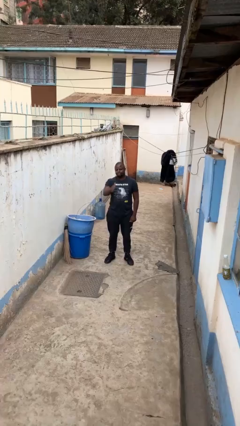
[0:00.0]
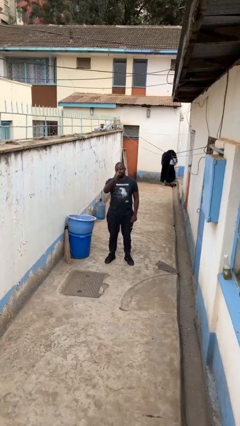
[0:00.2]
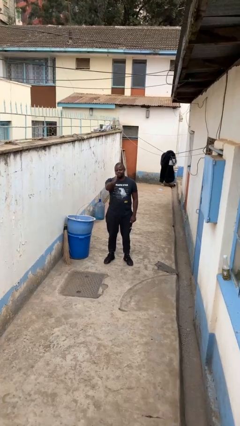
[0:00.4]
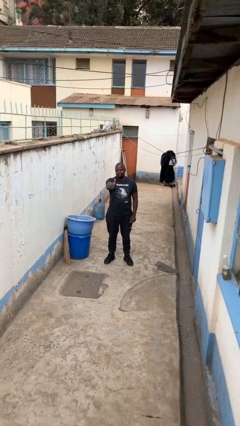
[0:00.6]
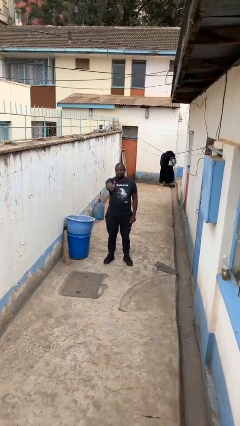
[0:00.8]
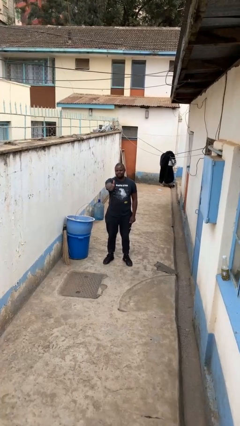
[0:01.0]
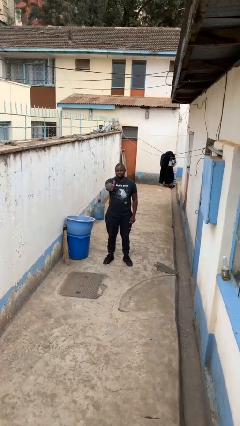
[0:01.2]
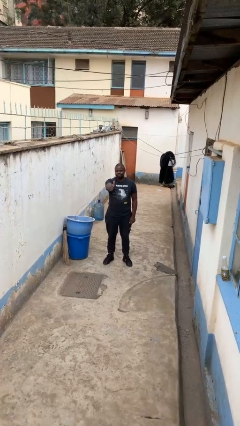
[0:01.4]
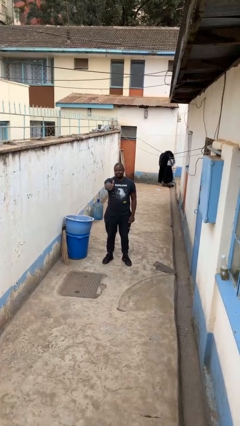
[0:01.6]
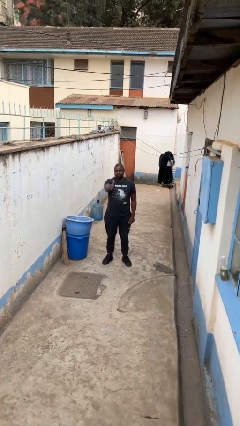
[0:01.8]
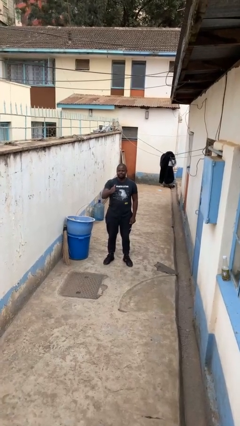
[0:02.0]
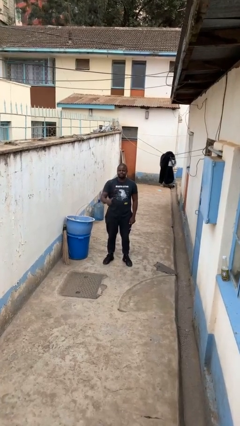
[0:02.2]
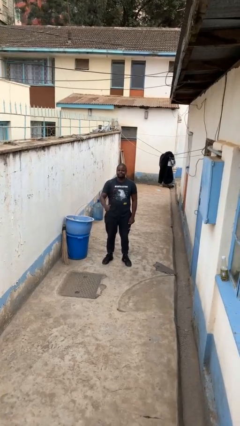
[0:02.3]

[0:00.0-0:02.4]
person gestures thumbs up

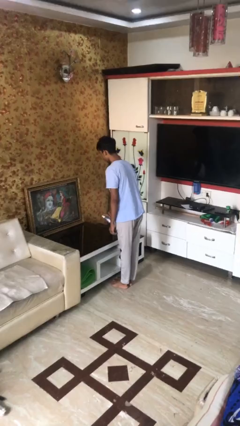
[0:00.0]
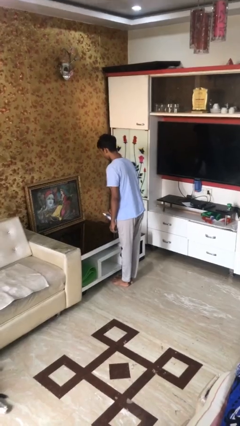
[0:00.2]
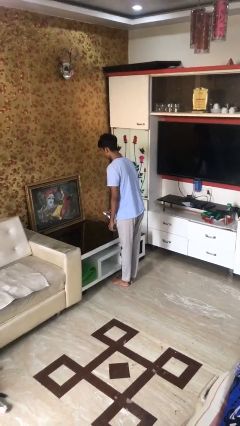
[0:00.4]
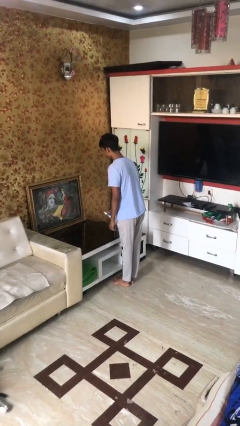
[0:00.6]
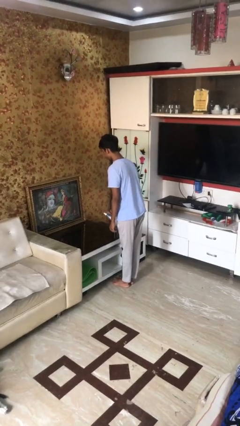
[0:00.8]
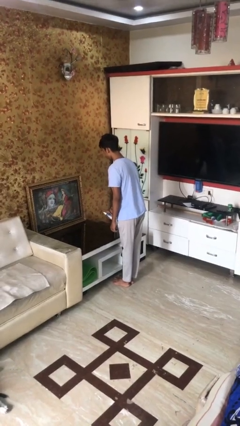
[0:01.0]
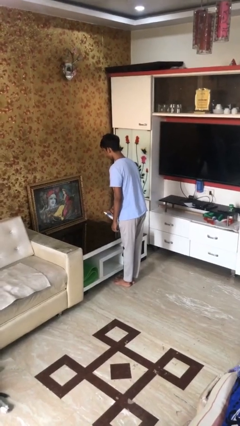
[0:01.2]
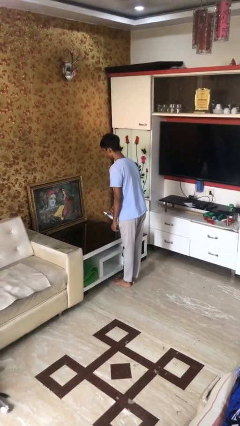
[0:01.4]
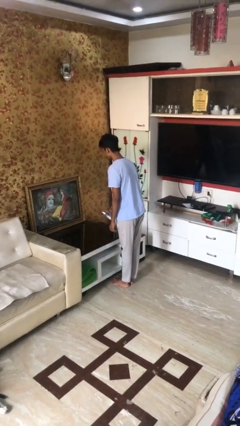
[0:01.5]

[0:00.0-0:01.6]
person sprays from bottle

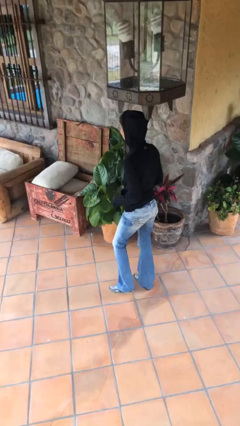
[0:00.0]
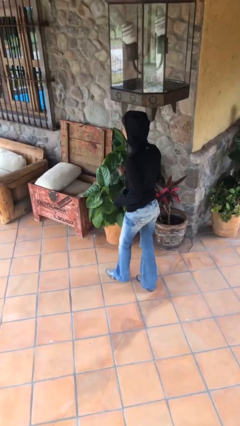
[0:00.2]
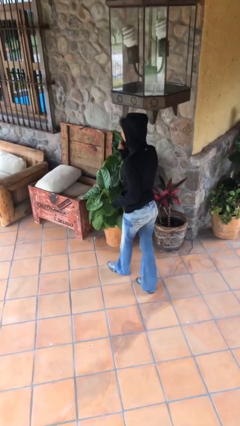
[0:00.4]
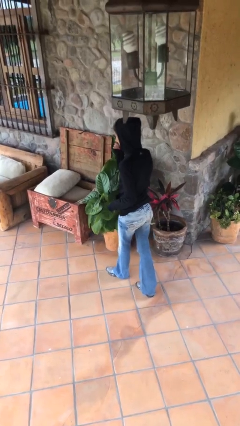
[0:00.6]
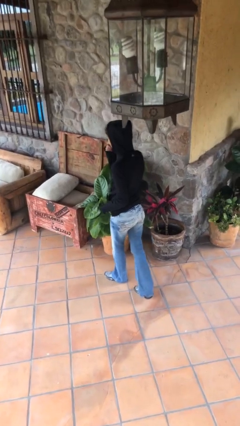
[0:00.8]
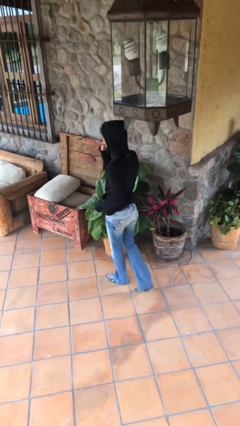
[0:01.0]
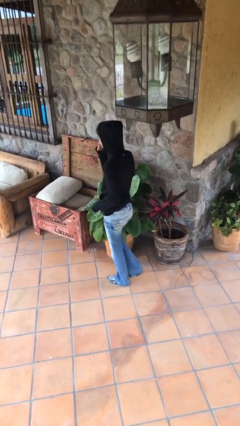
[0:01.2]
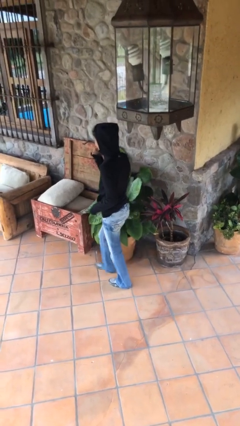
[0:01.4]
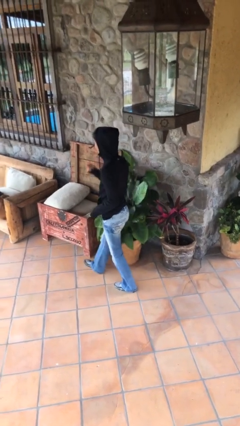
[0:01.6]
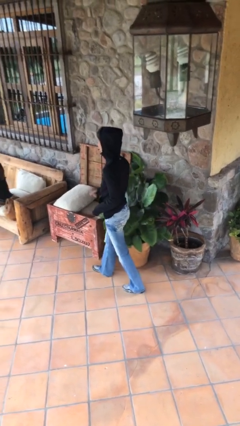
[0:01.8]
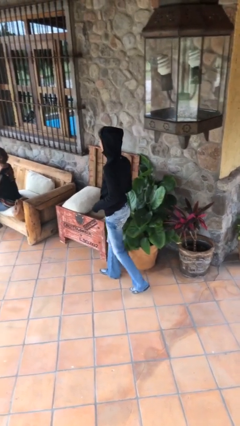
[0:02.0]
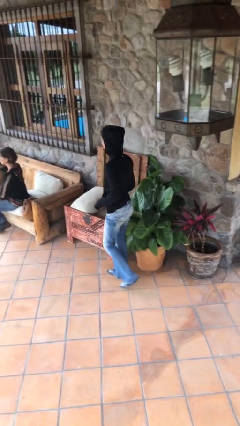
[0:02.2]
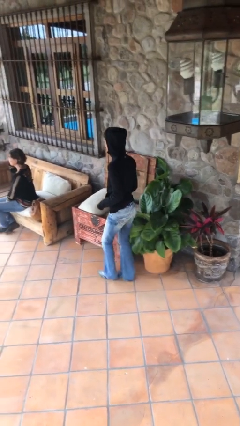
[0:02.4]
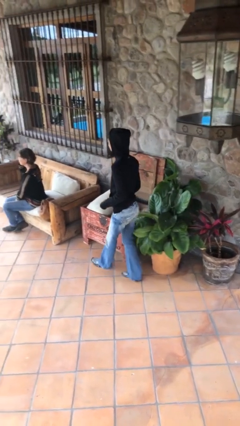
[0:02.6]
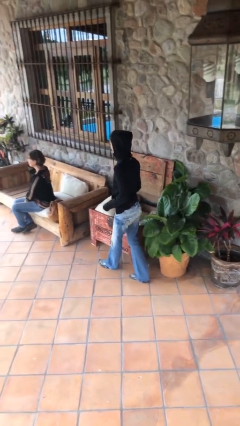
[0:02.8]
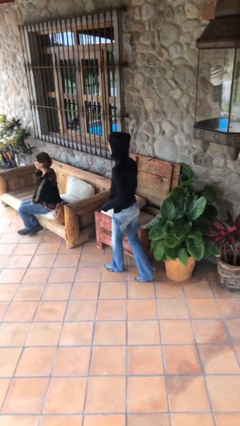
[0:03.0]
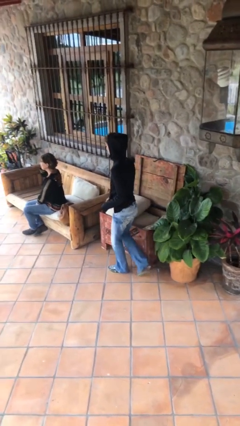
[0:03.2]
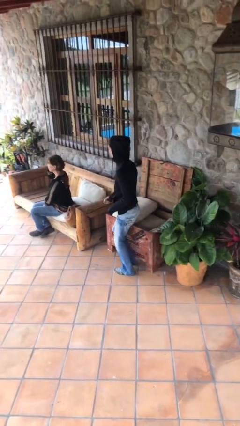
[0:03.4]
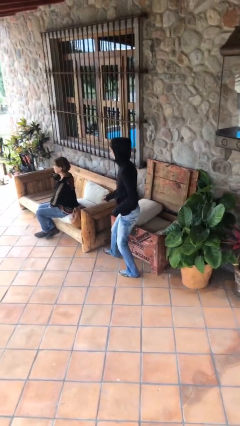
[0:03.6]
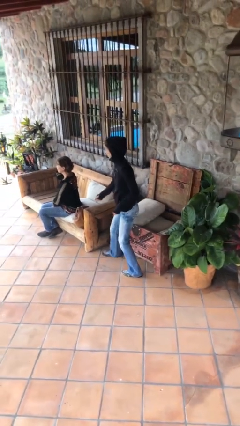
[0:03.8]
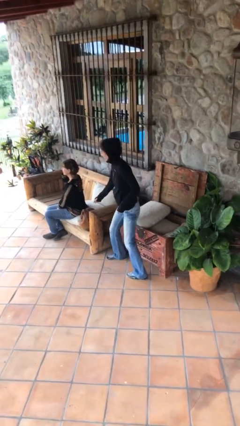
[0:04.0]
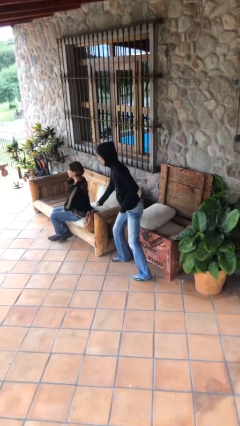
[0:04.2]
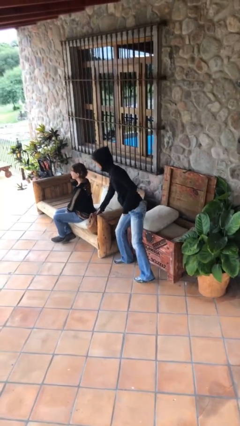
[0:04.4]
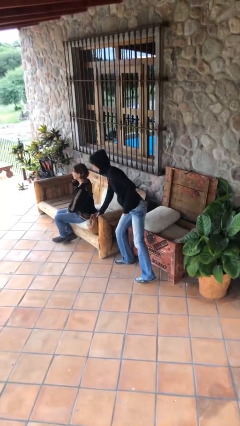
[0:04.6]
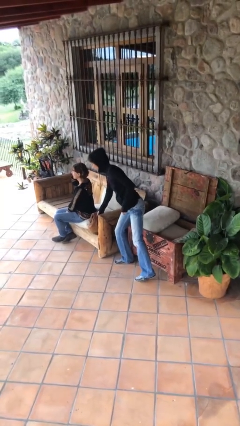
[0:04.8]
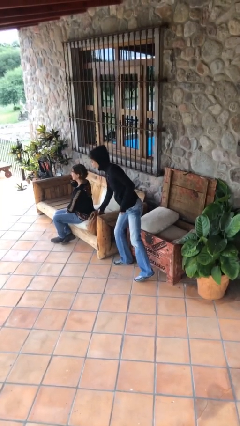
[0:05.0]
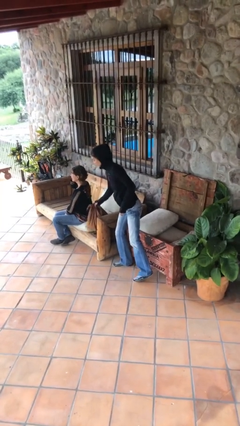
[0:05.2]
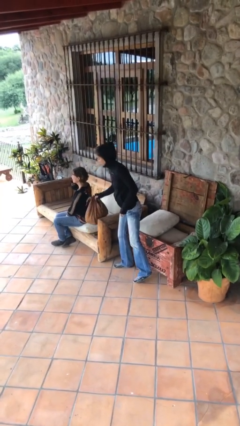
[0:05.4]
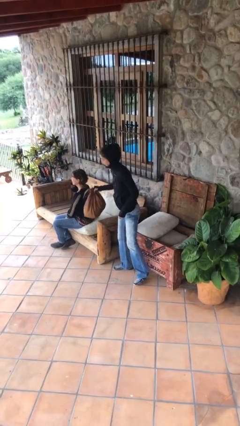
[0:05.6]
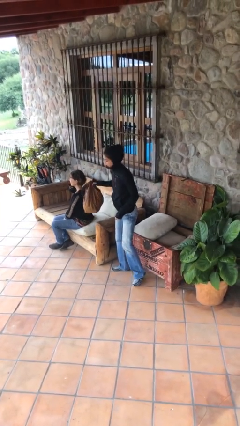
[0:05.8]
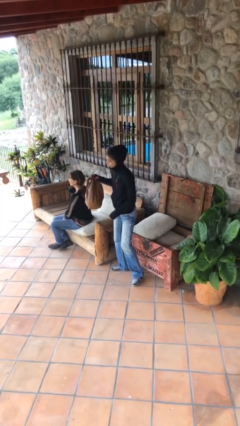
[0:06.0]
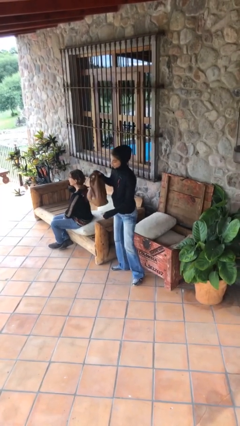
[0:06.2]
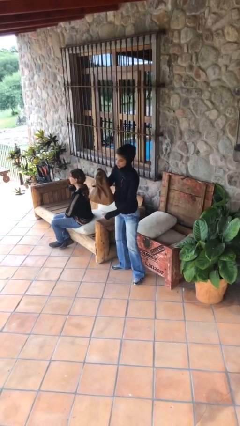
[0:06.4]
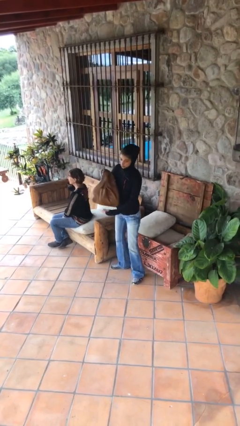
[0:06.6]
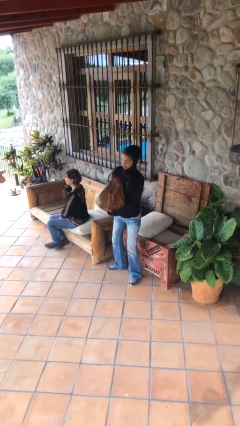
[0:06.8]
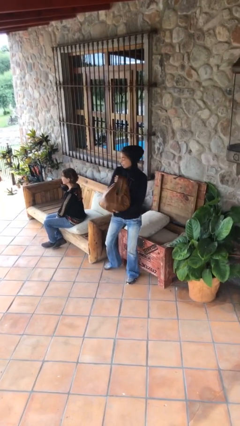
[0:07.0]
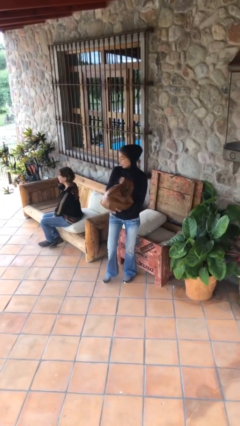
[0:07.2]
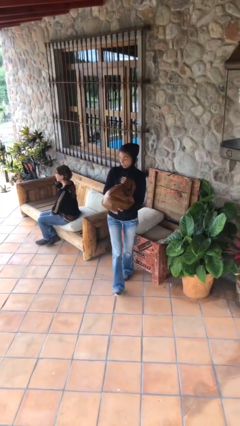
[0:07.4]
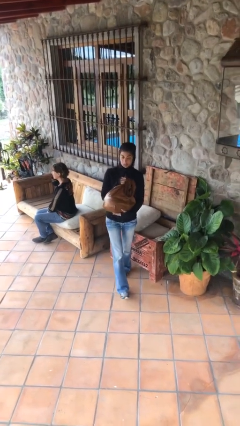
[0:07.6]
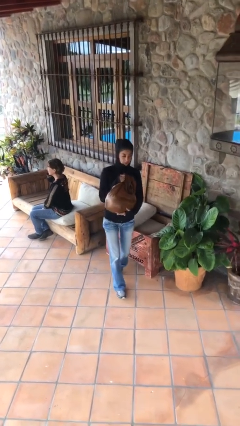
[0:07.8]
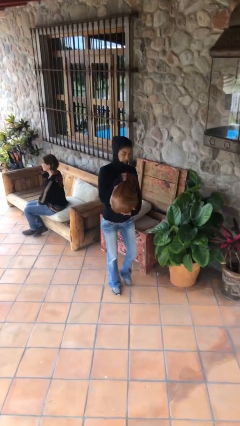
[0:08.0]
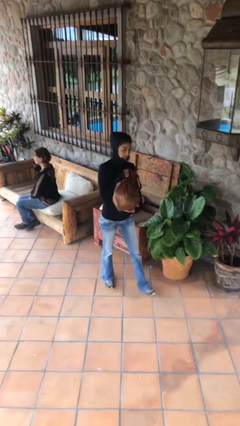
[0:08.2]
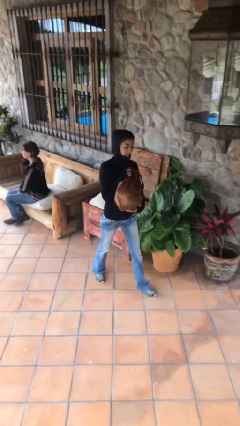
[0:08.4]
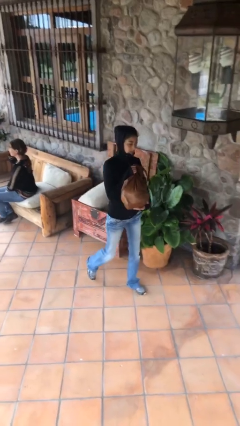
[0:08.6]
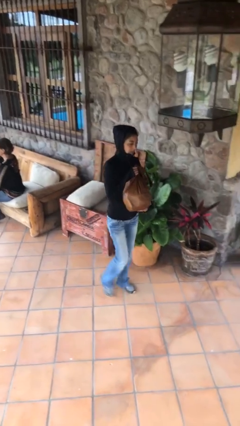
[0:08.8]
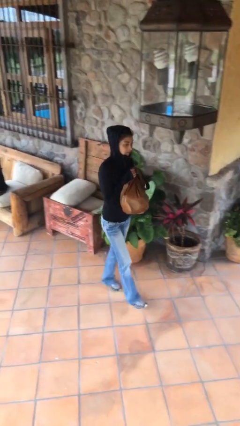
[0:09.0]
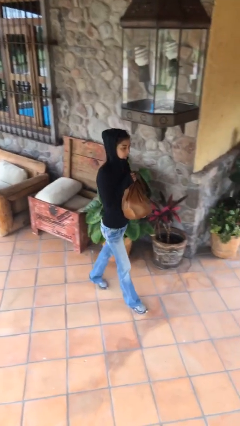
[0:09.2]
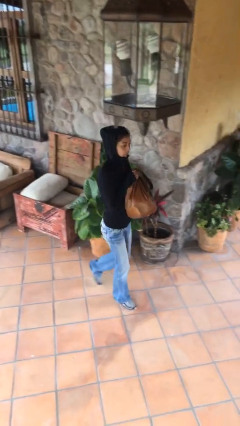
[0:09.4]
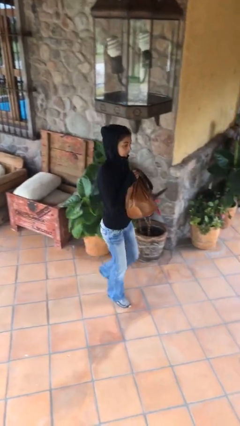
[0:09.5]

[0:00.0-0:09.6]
person steals object from person

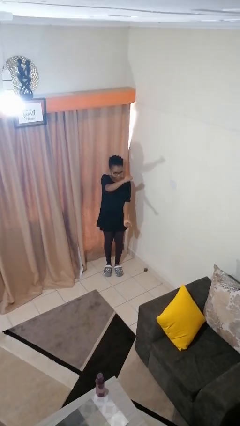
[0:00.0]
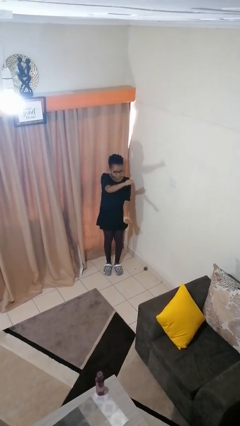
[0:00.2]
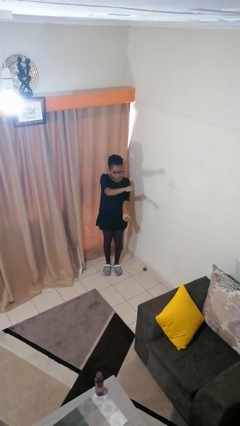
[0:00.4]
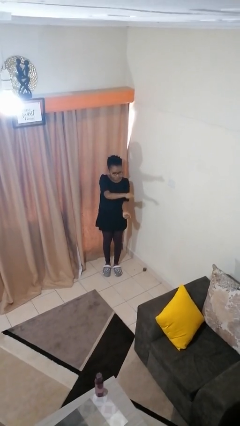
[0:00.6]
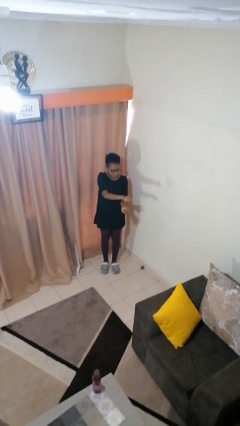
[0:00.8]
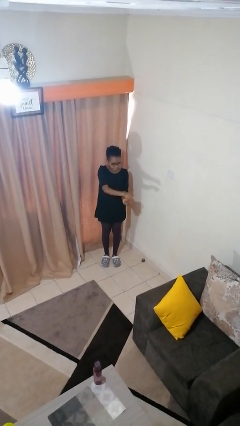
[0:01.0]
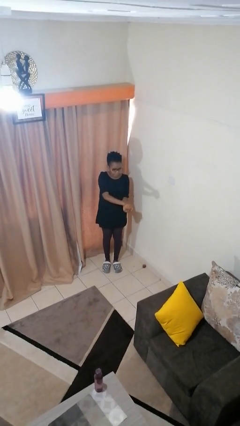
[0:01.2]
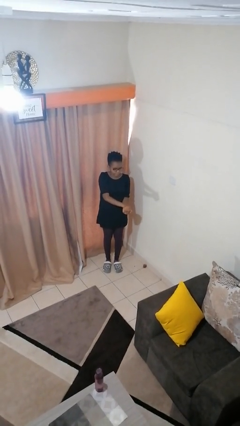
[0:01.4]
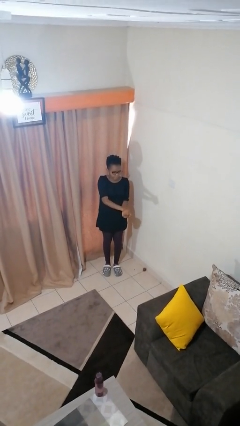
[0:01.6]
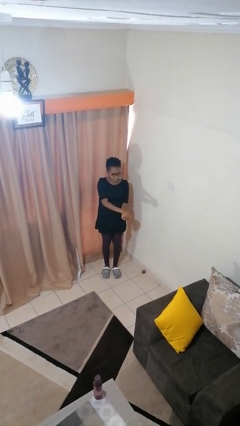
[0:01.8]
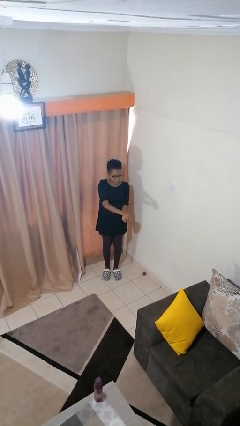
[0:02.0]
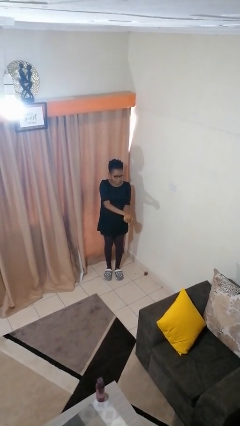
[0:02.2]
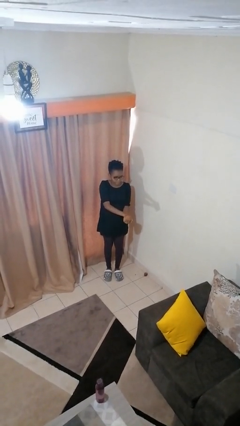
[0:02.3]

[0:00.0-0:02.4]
person gestures zoom out

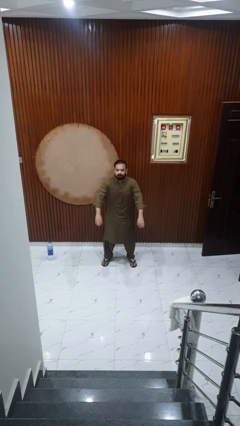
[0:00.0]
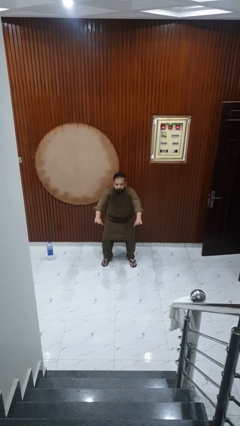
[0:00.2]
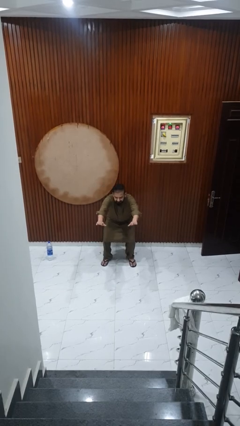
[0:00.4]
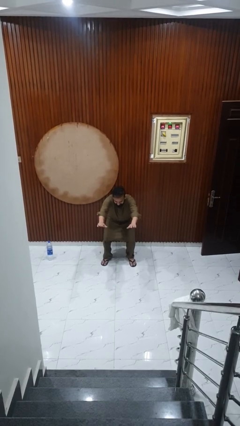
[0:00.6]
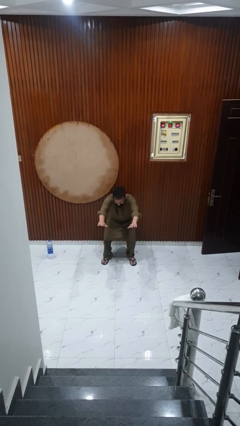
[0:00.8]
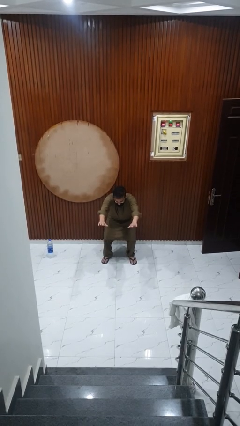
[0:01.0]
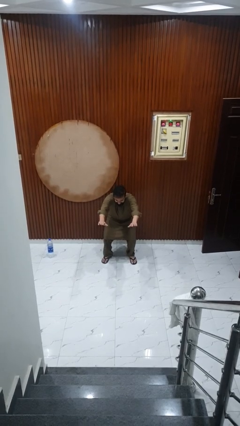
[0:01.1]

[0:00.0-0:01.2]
person squats

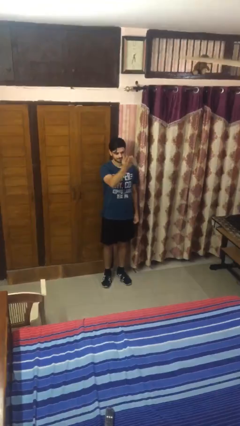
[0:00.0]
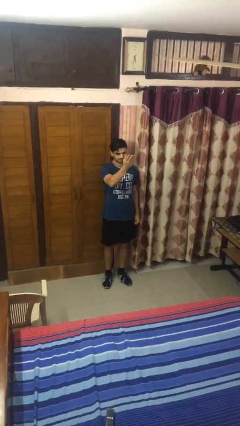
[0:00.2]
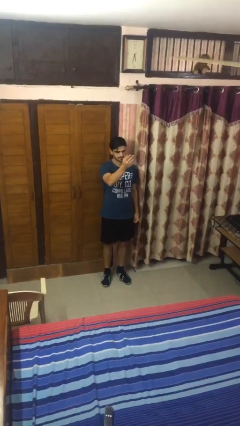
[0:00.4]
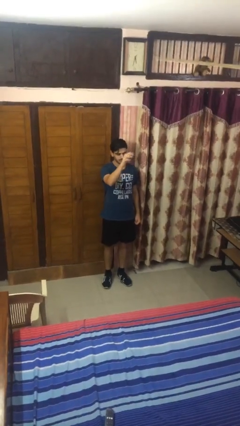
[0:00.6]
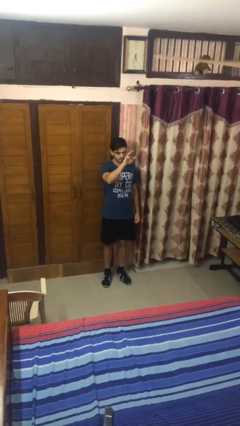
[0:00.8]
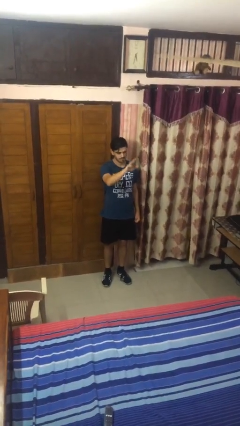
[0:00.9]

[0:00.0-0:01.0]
person gestures swipe down
